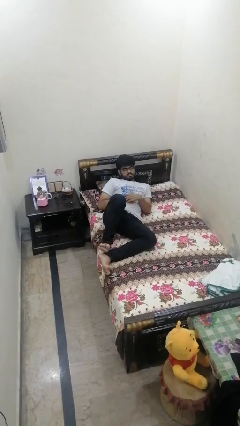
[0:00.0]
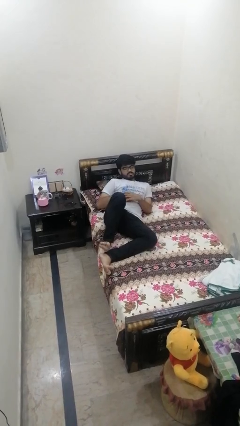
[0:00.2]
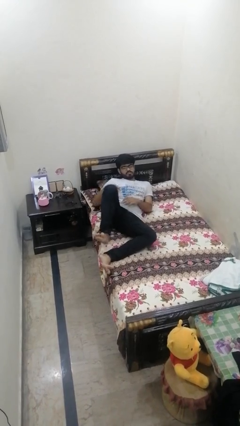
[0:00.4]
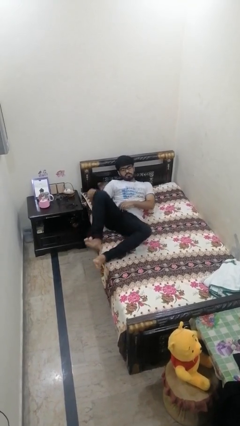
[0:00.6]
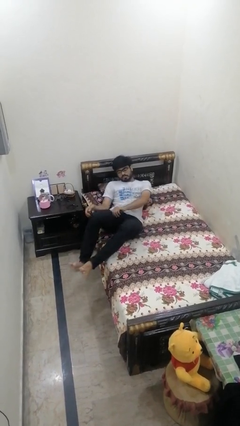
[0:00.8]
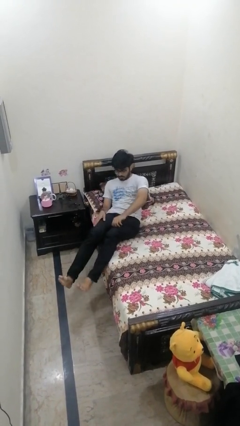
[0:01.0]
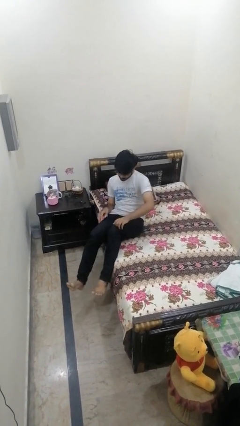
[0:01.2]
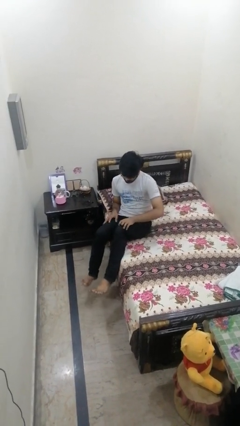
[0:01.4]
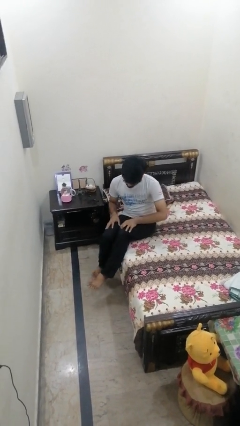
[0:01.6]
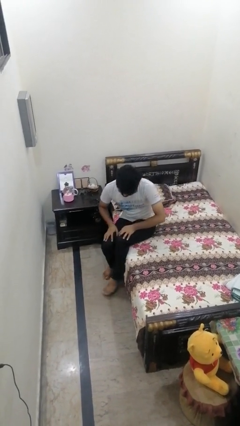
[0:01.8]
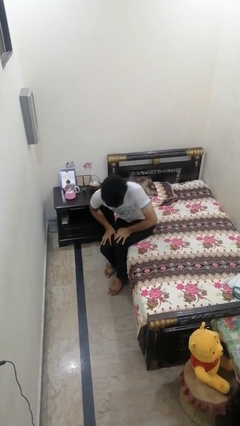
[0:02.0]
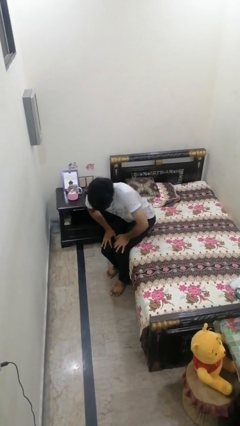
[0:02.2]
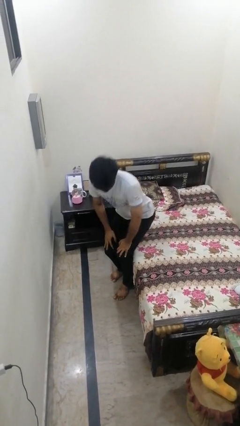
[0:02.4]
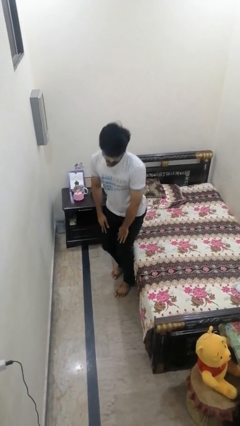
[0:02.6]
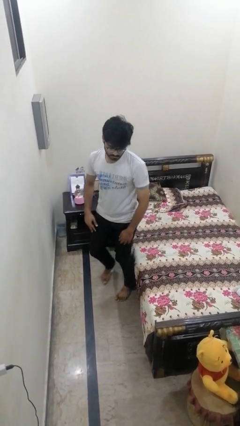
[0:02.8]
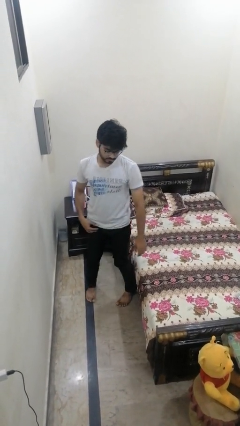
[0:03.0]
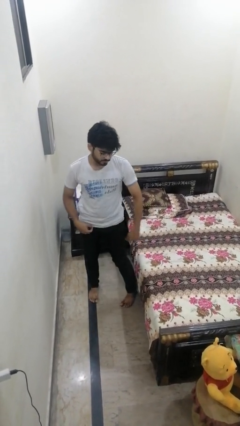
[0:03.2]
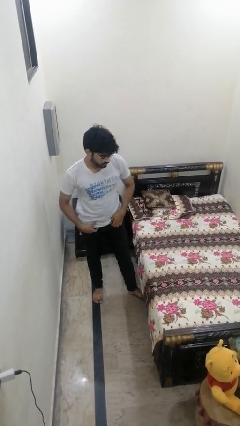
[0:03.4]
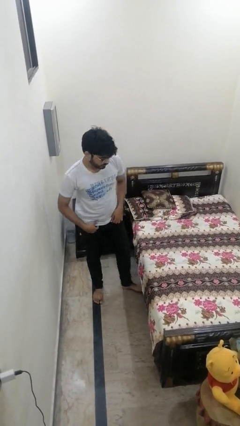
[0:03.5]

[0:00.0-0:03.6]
person stands up

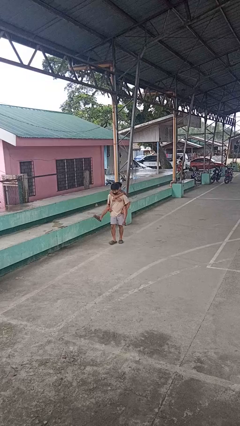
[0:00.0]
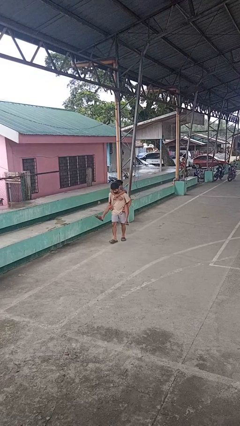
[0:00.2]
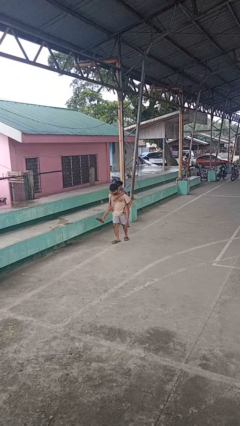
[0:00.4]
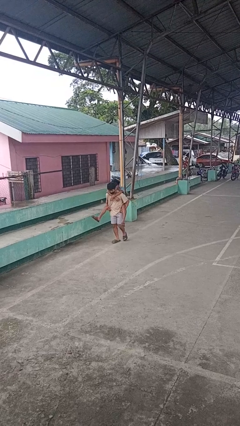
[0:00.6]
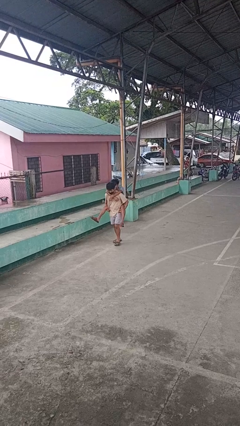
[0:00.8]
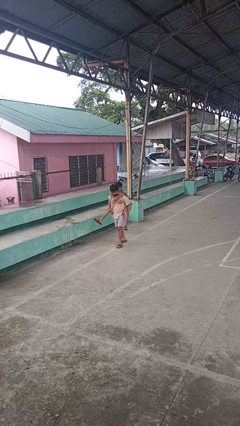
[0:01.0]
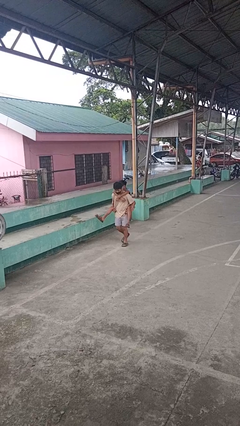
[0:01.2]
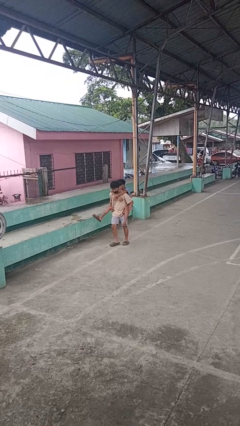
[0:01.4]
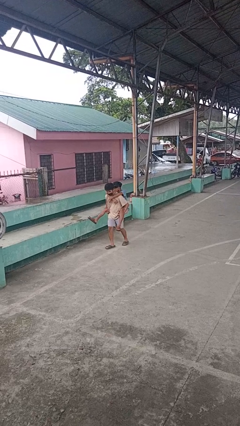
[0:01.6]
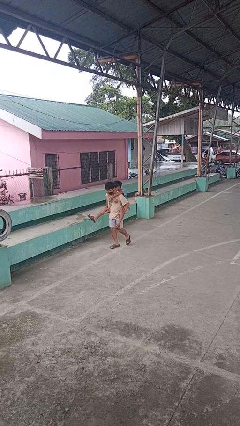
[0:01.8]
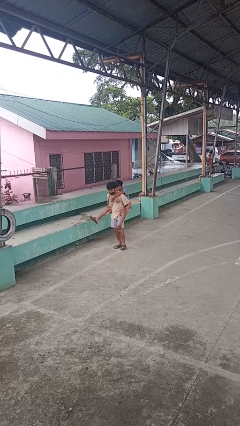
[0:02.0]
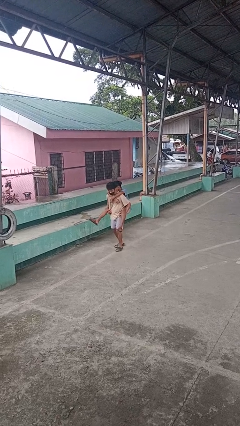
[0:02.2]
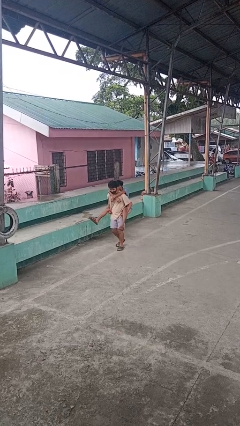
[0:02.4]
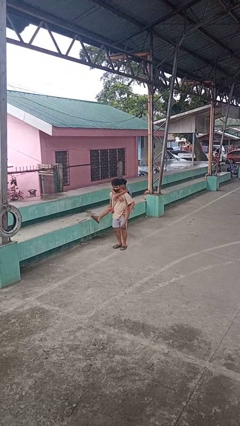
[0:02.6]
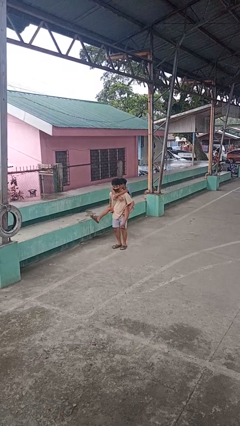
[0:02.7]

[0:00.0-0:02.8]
person carries person on back

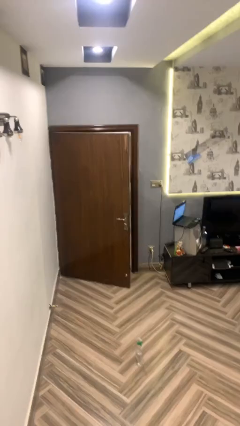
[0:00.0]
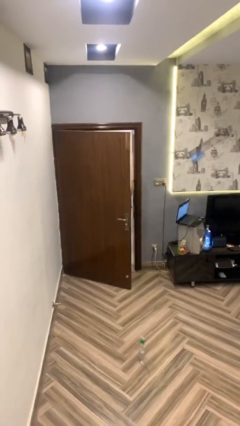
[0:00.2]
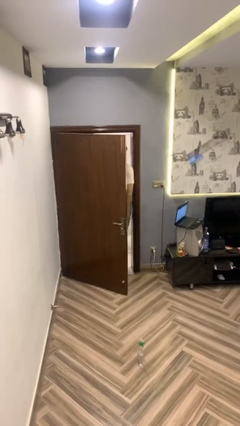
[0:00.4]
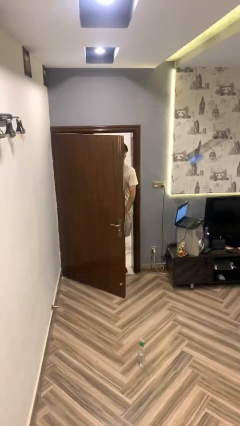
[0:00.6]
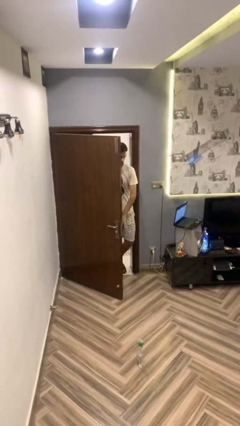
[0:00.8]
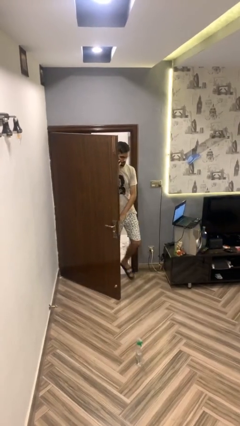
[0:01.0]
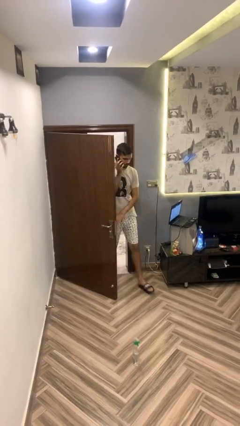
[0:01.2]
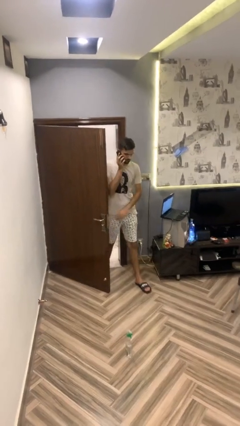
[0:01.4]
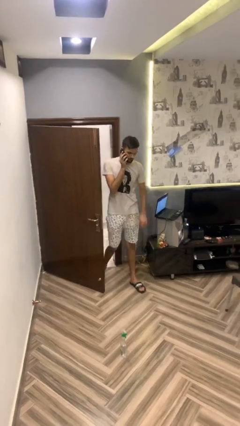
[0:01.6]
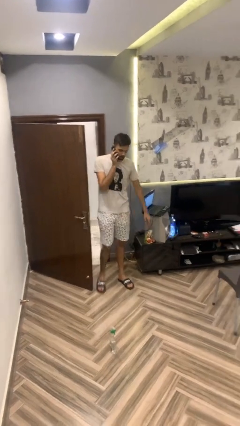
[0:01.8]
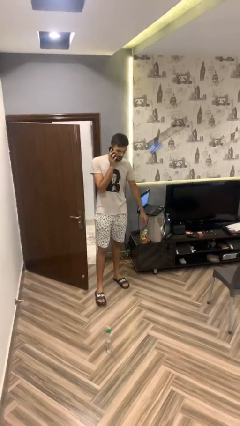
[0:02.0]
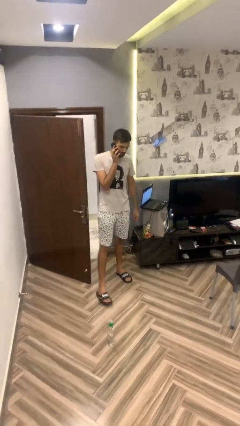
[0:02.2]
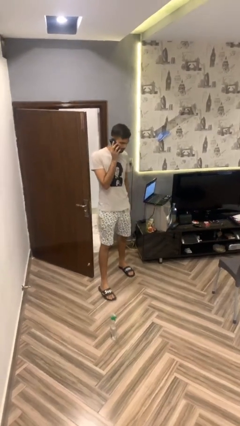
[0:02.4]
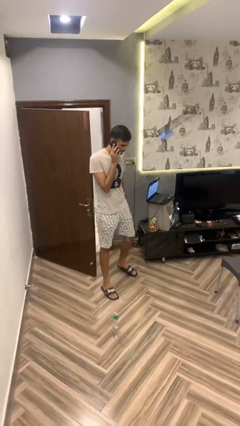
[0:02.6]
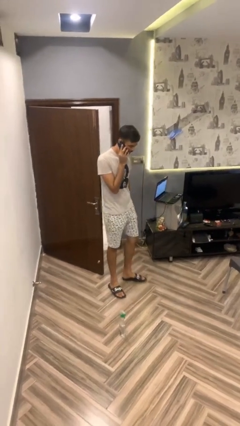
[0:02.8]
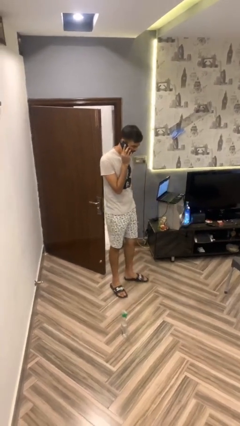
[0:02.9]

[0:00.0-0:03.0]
person enters scene through structure

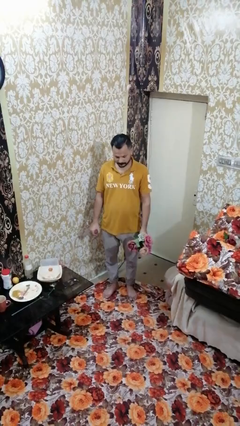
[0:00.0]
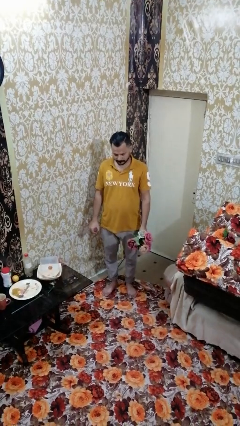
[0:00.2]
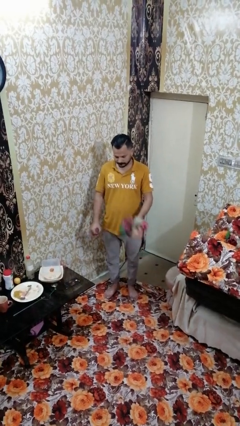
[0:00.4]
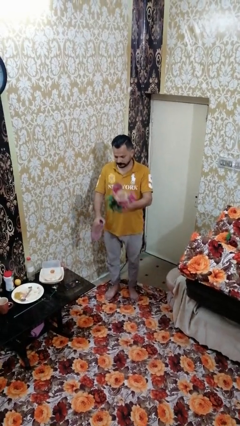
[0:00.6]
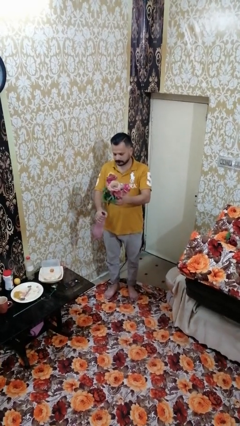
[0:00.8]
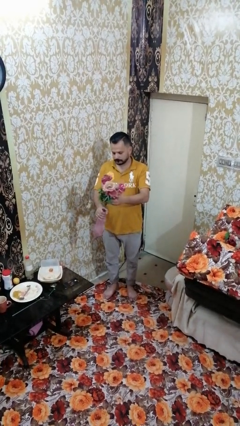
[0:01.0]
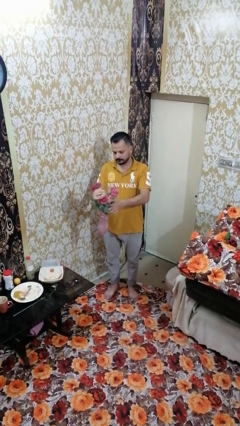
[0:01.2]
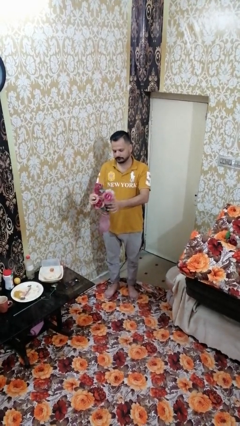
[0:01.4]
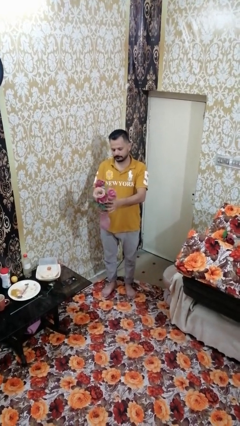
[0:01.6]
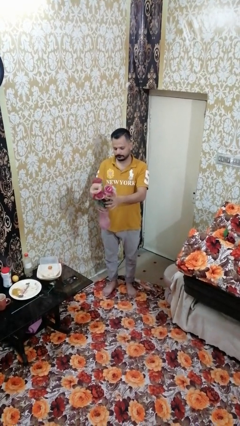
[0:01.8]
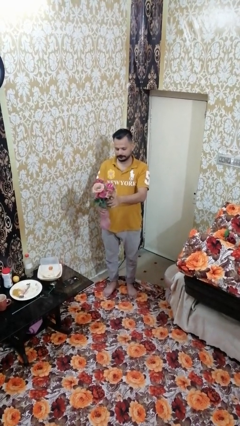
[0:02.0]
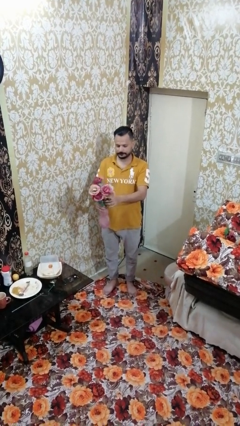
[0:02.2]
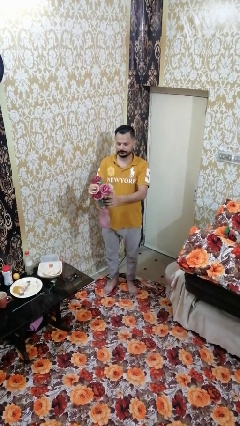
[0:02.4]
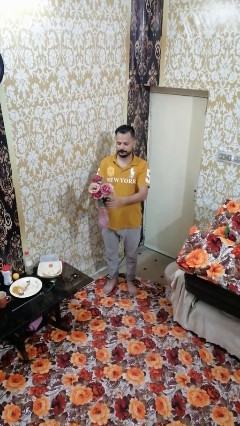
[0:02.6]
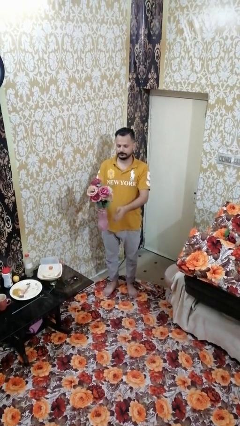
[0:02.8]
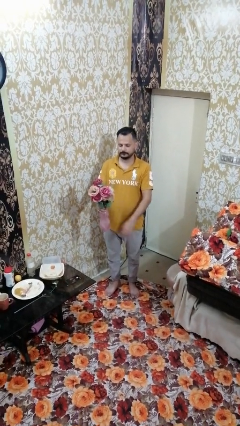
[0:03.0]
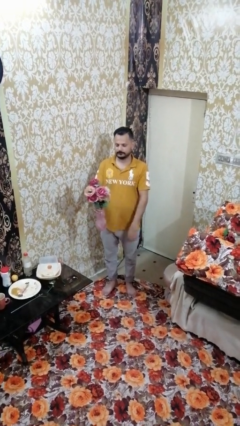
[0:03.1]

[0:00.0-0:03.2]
person arranges flowers in vase

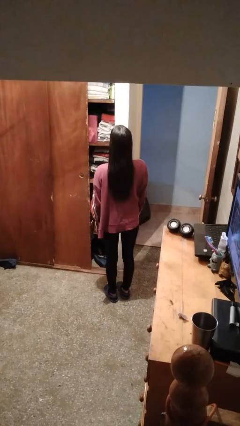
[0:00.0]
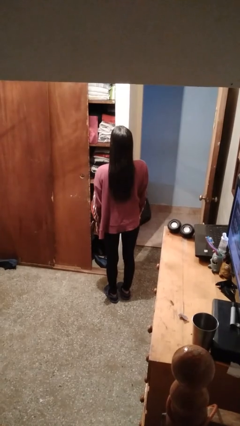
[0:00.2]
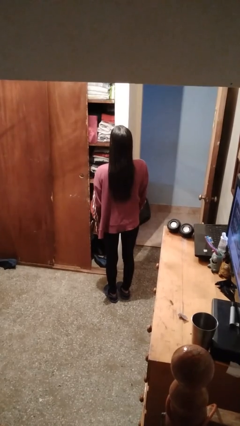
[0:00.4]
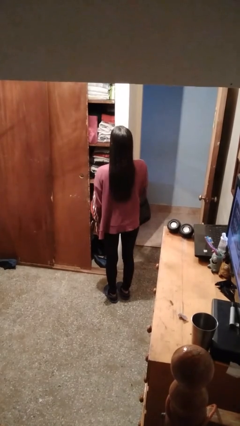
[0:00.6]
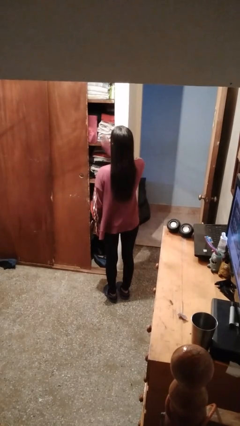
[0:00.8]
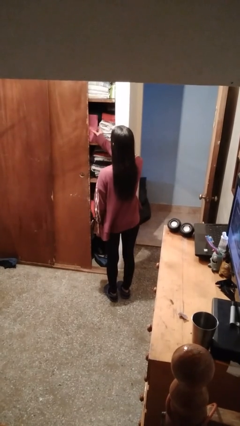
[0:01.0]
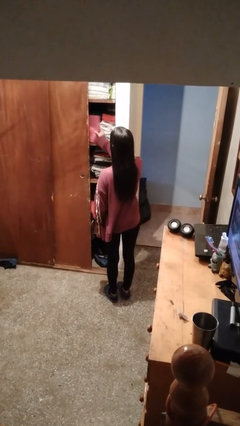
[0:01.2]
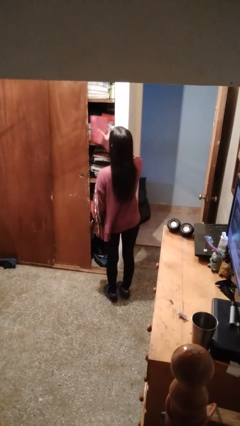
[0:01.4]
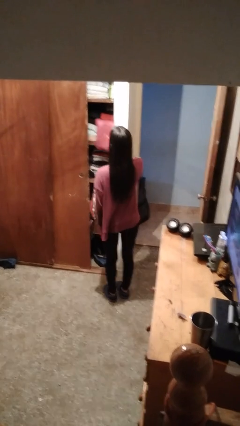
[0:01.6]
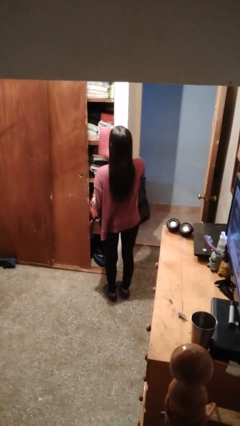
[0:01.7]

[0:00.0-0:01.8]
person puts down object on shelf

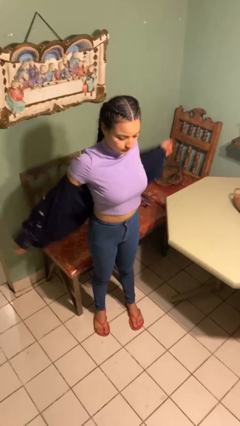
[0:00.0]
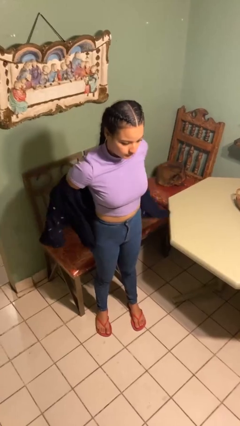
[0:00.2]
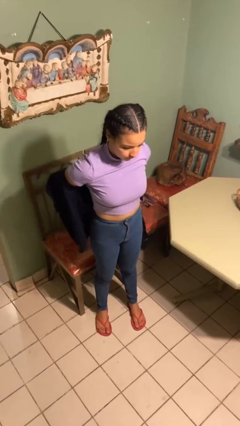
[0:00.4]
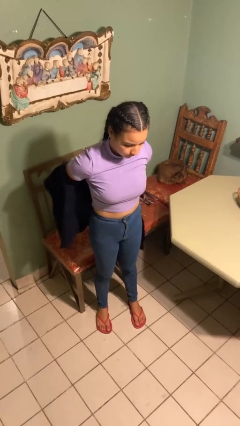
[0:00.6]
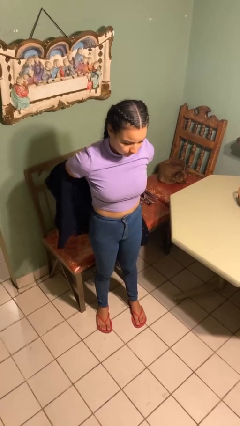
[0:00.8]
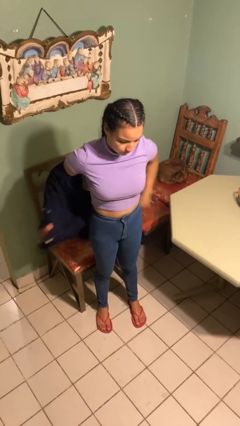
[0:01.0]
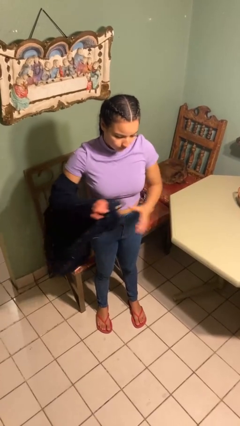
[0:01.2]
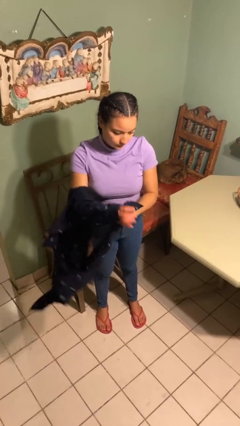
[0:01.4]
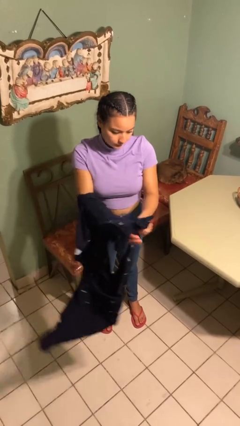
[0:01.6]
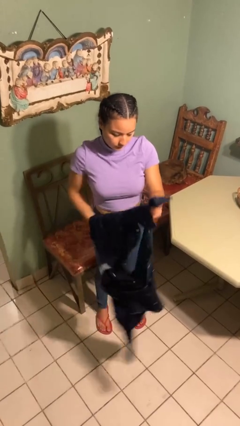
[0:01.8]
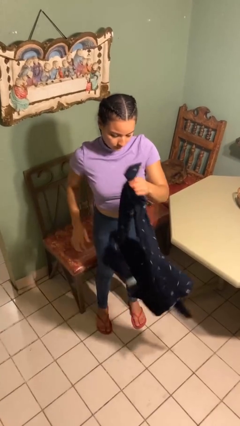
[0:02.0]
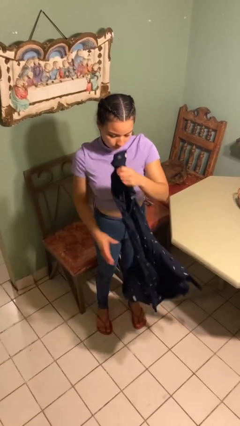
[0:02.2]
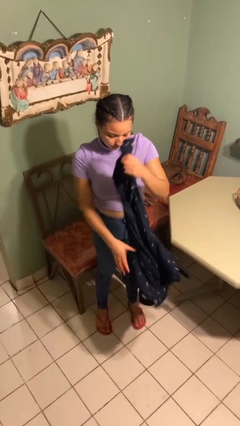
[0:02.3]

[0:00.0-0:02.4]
person takes off shirt

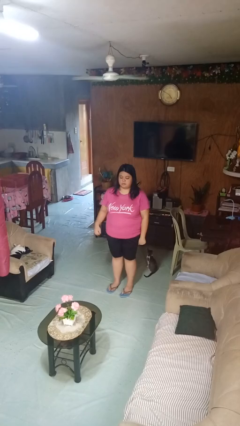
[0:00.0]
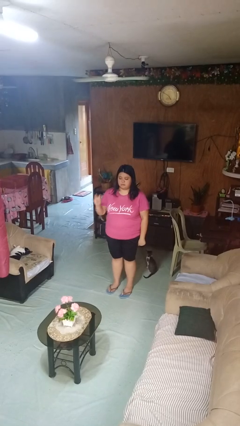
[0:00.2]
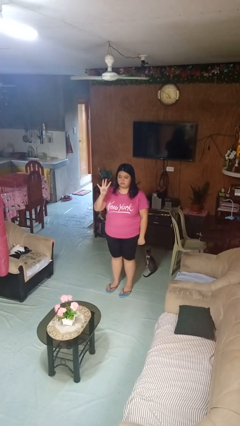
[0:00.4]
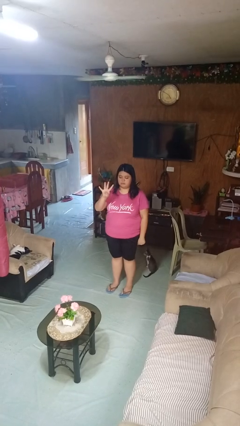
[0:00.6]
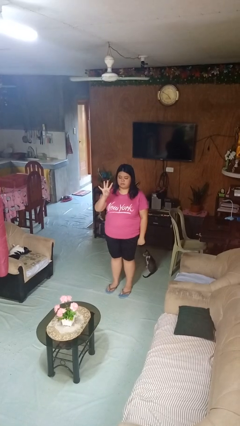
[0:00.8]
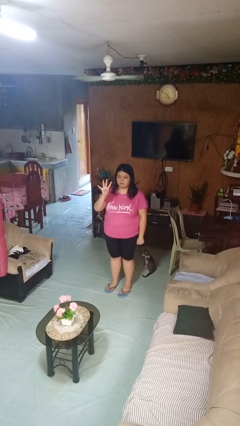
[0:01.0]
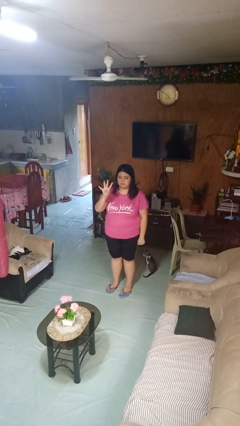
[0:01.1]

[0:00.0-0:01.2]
person gestures number four
